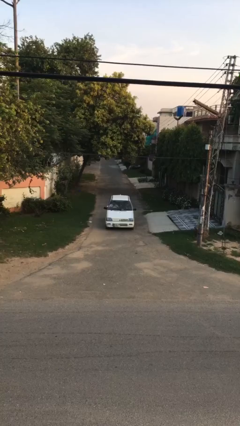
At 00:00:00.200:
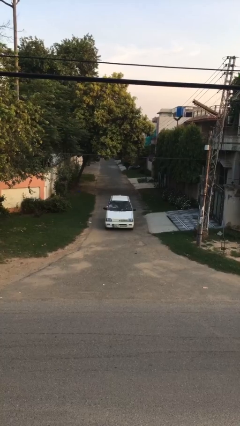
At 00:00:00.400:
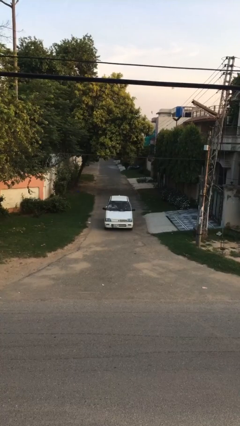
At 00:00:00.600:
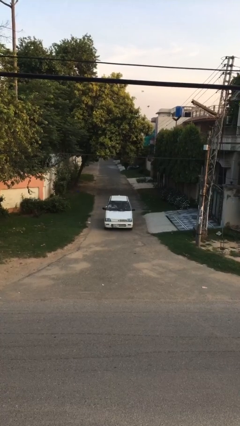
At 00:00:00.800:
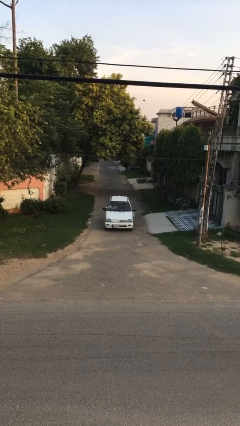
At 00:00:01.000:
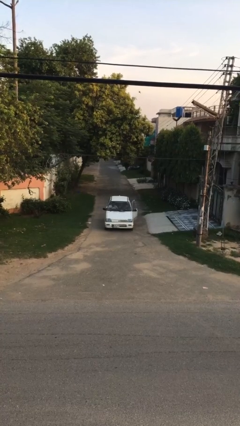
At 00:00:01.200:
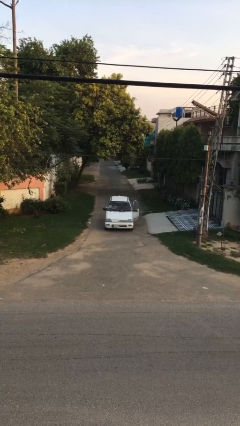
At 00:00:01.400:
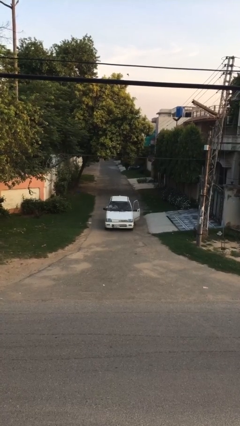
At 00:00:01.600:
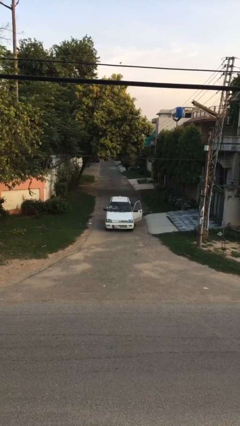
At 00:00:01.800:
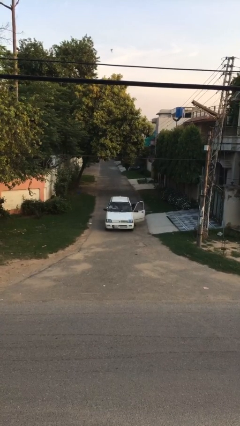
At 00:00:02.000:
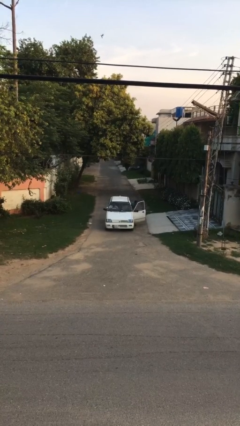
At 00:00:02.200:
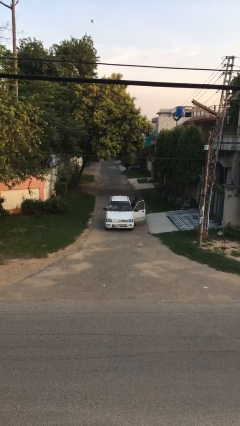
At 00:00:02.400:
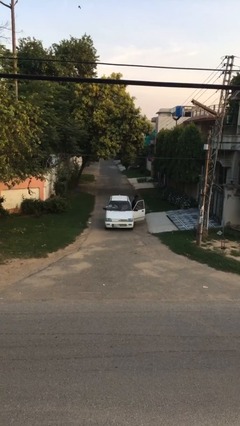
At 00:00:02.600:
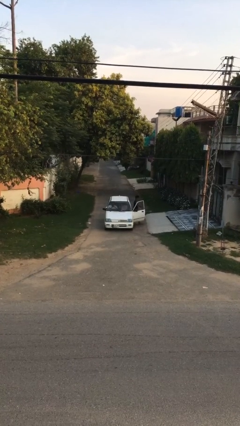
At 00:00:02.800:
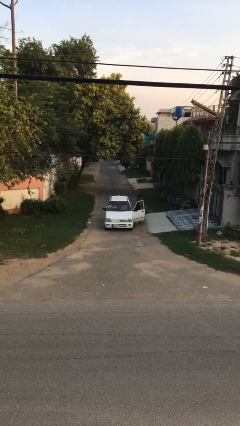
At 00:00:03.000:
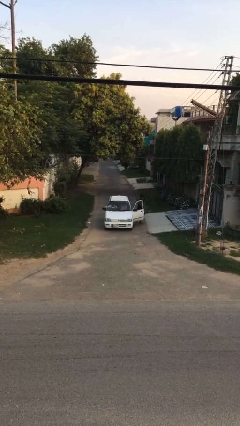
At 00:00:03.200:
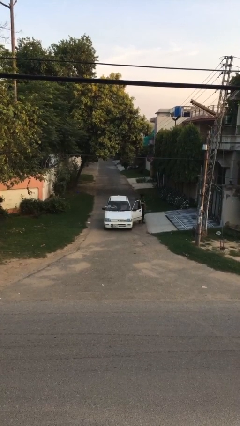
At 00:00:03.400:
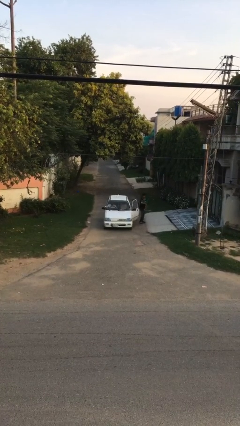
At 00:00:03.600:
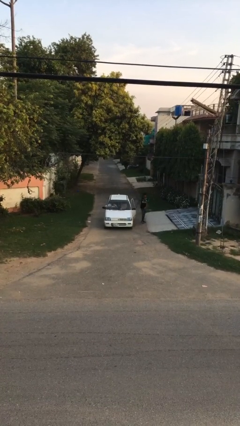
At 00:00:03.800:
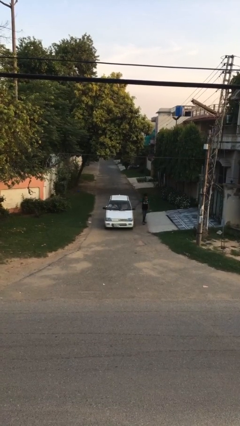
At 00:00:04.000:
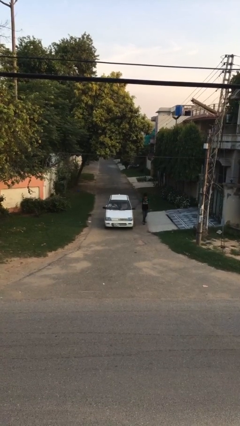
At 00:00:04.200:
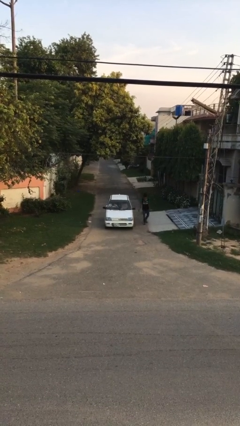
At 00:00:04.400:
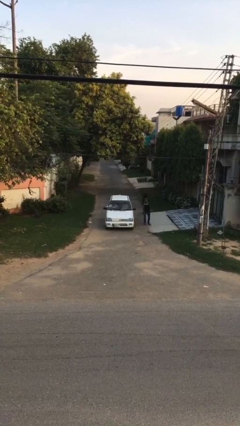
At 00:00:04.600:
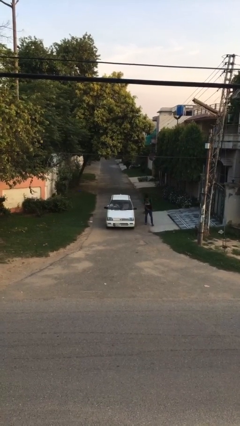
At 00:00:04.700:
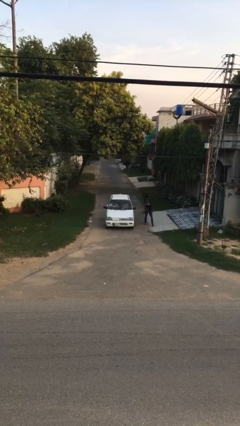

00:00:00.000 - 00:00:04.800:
car drops off person

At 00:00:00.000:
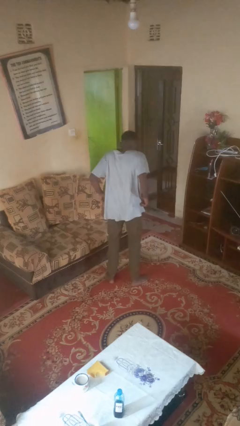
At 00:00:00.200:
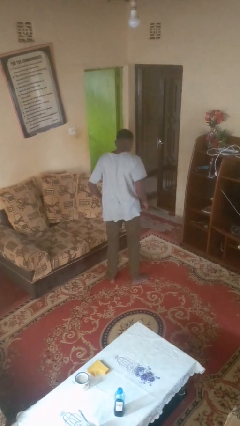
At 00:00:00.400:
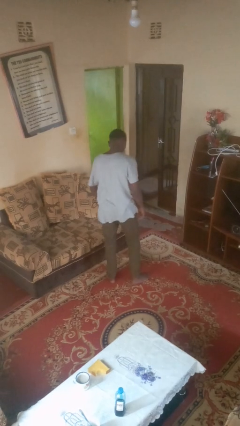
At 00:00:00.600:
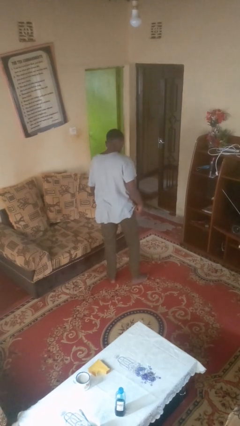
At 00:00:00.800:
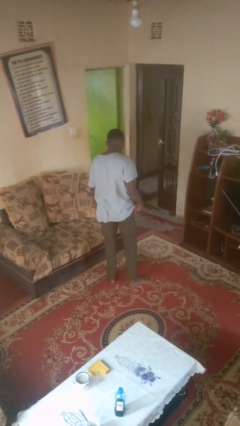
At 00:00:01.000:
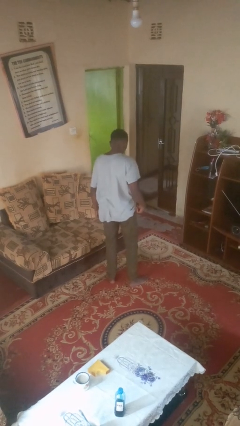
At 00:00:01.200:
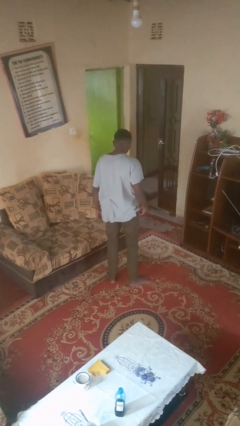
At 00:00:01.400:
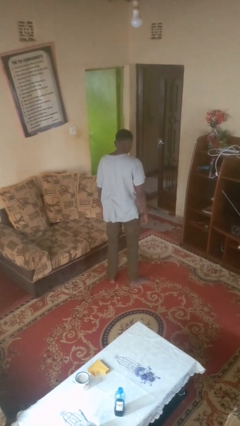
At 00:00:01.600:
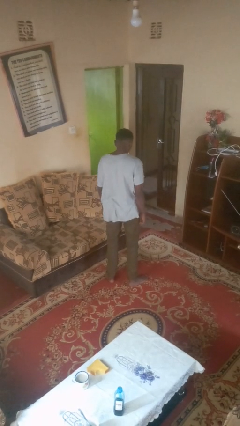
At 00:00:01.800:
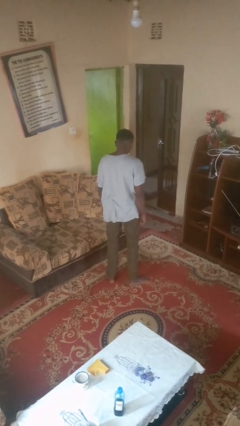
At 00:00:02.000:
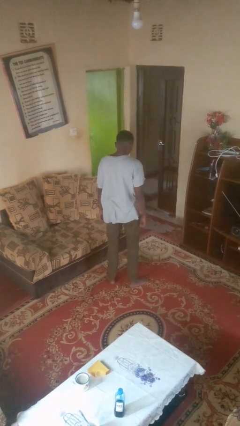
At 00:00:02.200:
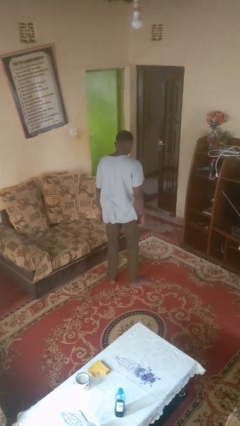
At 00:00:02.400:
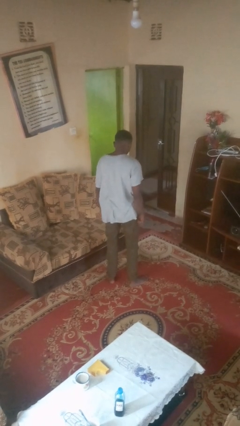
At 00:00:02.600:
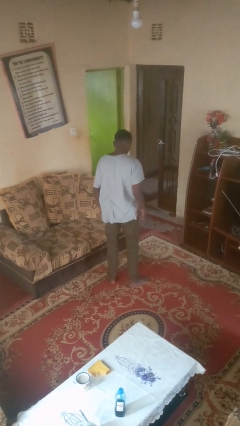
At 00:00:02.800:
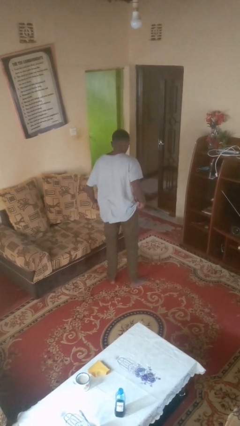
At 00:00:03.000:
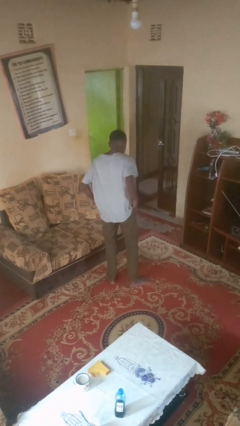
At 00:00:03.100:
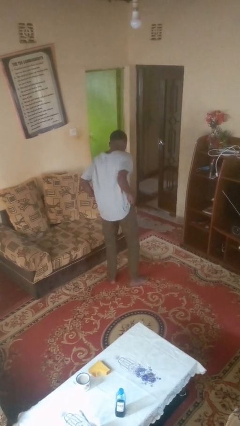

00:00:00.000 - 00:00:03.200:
person washes dish

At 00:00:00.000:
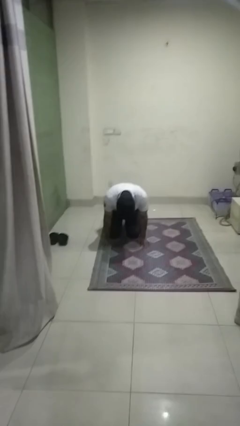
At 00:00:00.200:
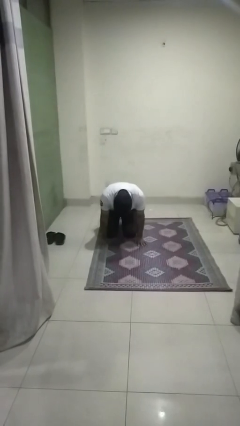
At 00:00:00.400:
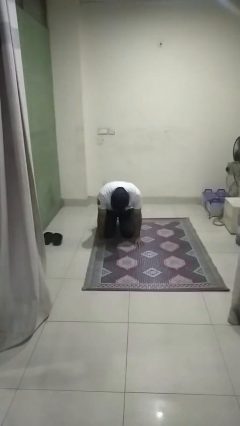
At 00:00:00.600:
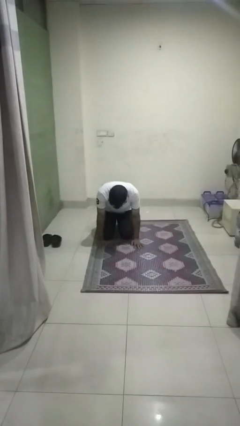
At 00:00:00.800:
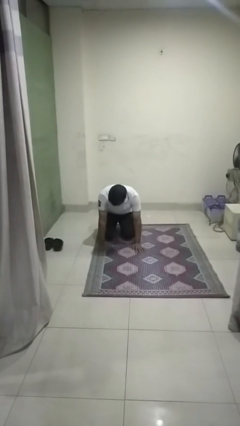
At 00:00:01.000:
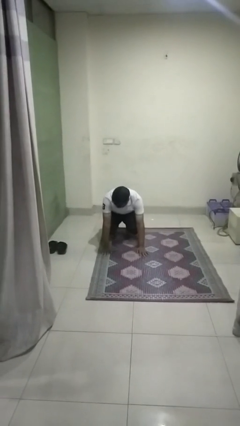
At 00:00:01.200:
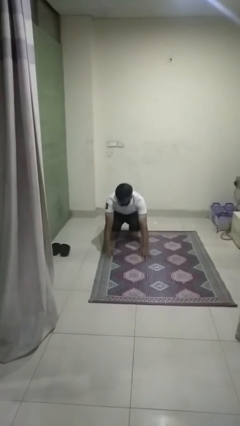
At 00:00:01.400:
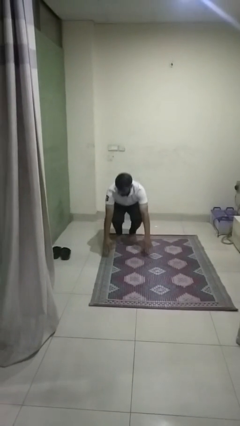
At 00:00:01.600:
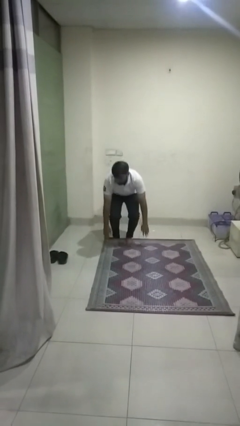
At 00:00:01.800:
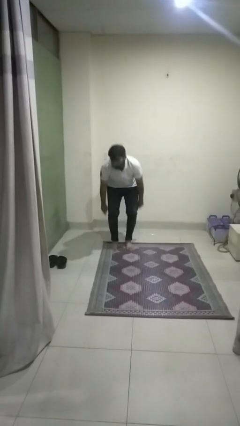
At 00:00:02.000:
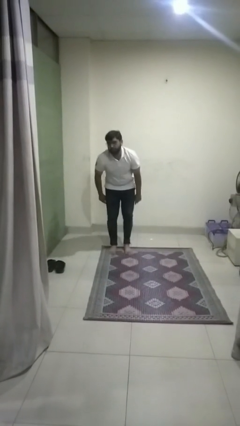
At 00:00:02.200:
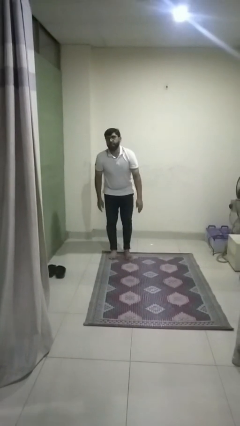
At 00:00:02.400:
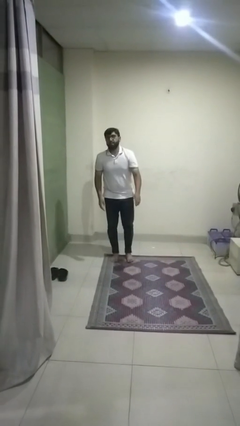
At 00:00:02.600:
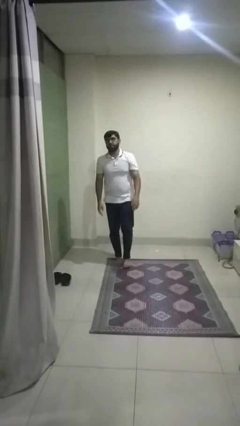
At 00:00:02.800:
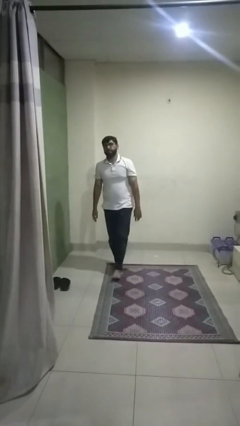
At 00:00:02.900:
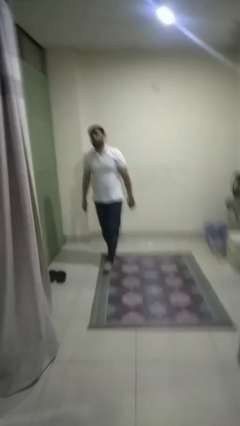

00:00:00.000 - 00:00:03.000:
person stands up from floor

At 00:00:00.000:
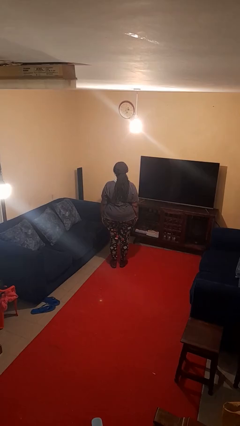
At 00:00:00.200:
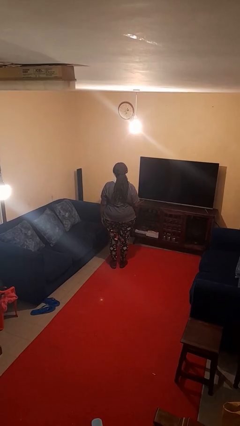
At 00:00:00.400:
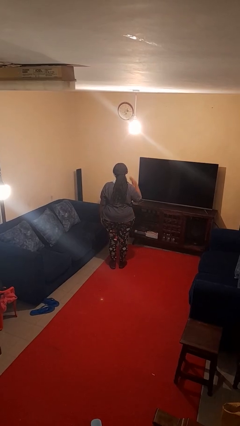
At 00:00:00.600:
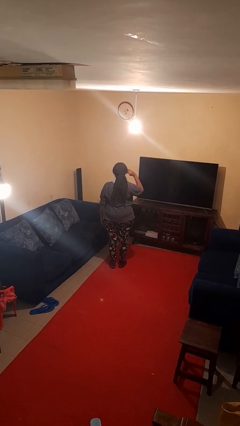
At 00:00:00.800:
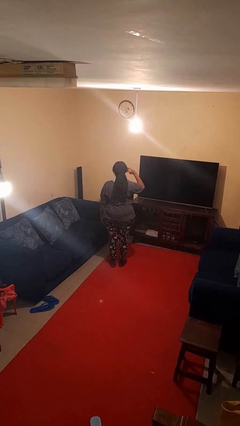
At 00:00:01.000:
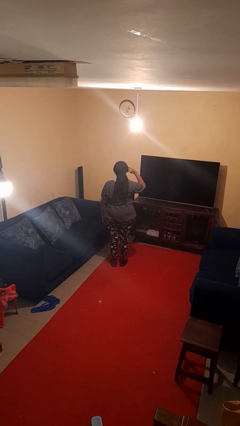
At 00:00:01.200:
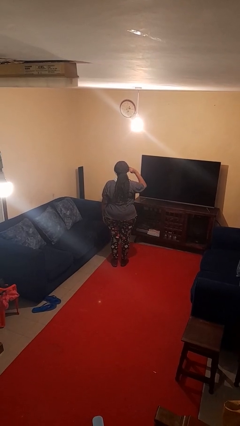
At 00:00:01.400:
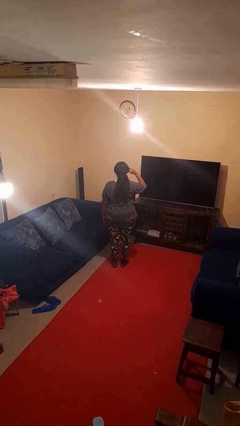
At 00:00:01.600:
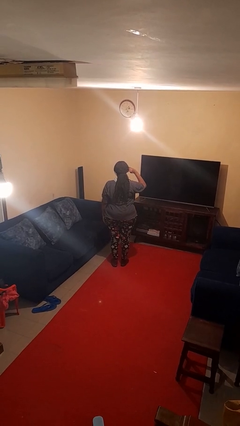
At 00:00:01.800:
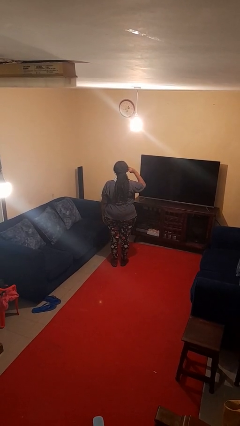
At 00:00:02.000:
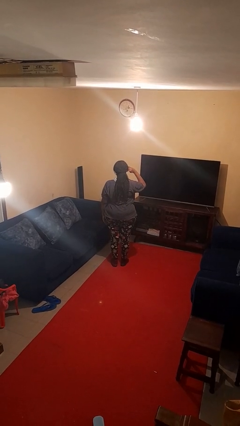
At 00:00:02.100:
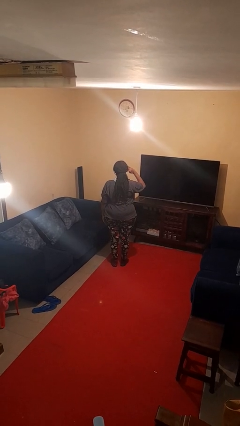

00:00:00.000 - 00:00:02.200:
person salutes

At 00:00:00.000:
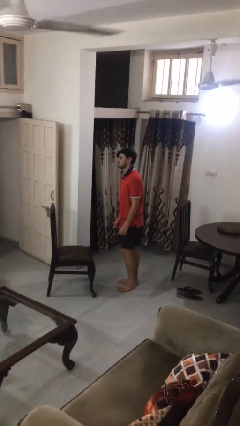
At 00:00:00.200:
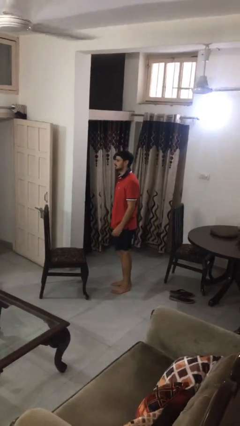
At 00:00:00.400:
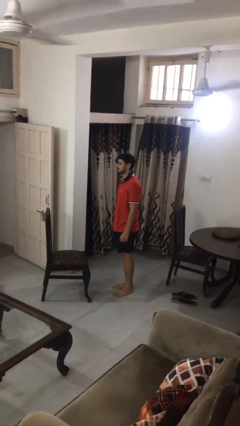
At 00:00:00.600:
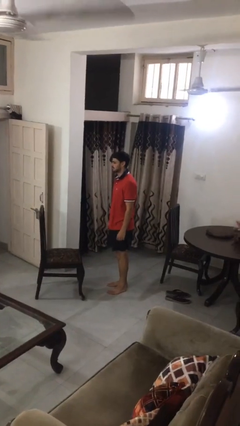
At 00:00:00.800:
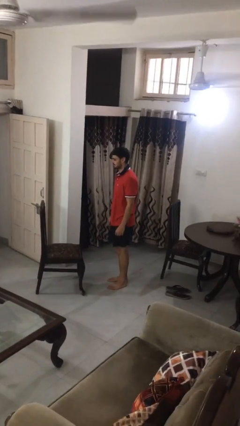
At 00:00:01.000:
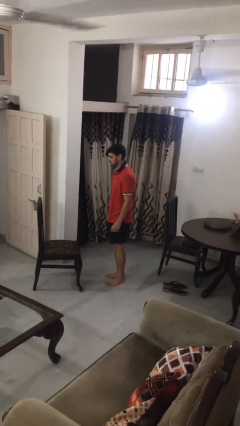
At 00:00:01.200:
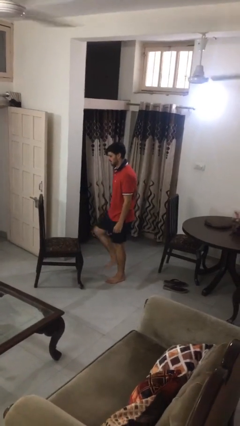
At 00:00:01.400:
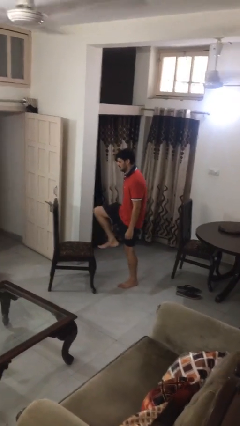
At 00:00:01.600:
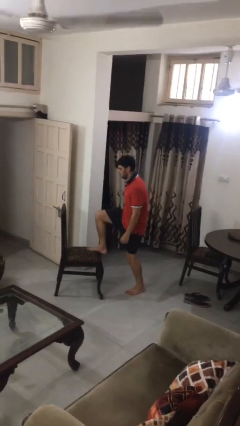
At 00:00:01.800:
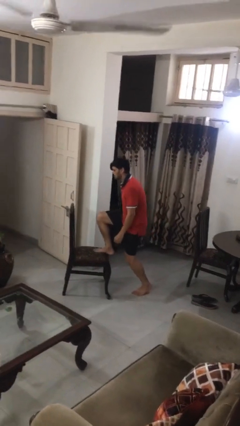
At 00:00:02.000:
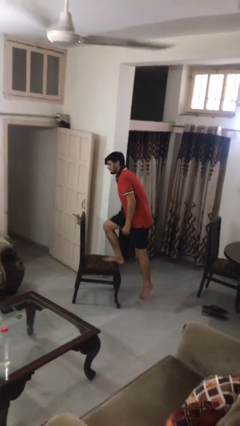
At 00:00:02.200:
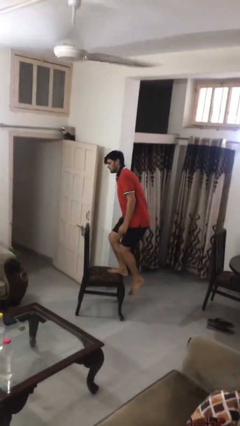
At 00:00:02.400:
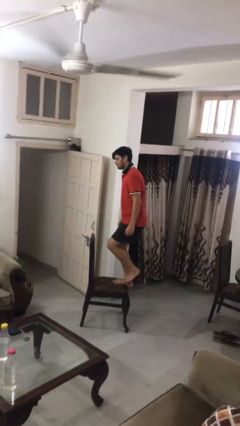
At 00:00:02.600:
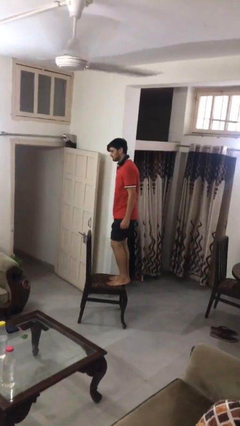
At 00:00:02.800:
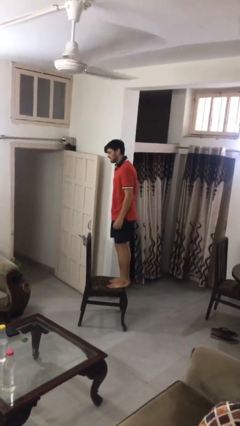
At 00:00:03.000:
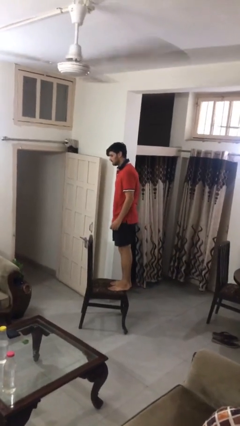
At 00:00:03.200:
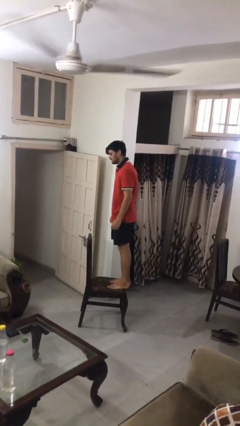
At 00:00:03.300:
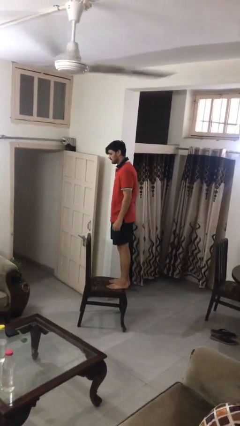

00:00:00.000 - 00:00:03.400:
person climbs on chair

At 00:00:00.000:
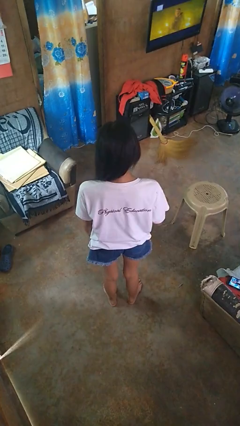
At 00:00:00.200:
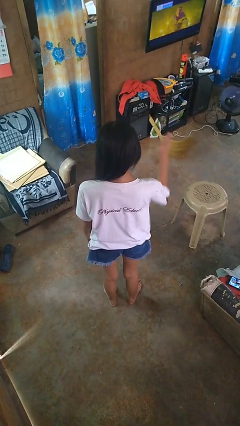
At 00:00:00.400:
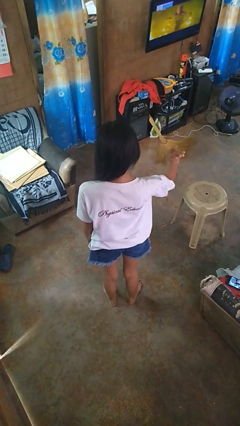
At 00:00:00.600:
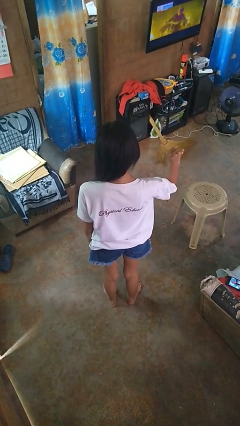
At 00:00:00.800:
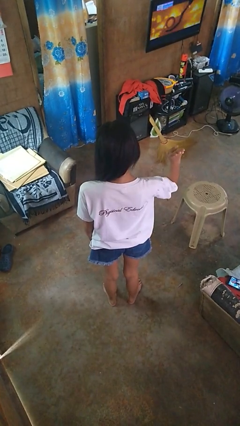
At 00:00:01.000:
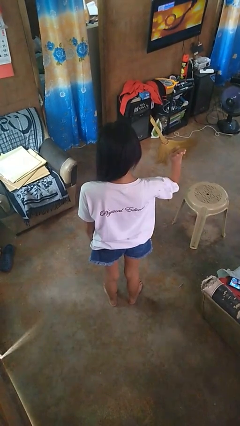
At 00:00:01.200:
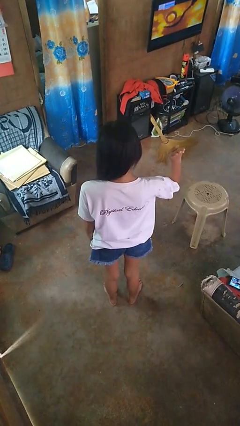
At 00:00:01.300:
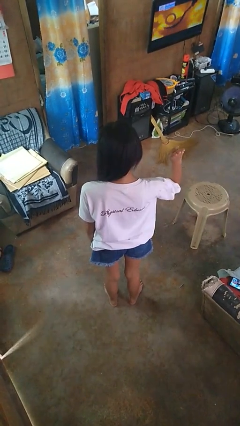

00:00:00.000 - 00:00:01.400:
person gestures number four
